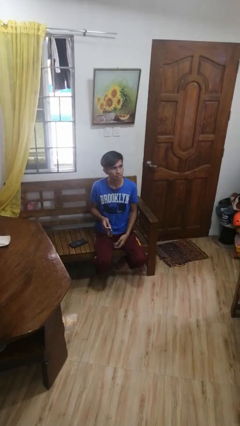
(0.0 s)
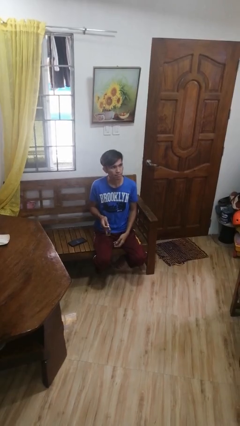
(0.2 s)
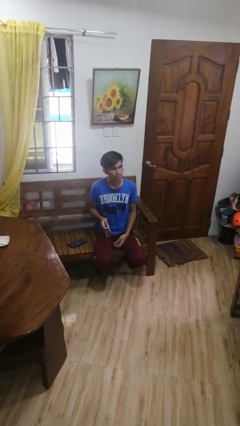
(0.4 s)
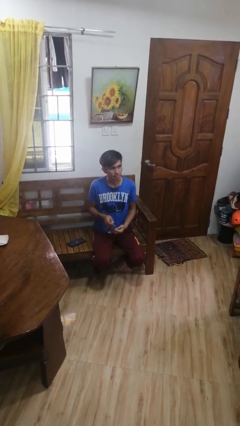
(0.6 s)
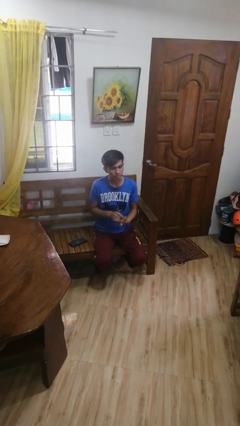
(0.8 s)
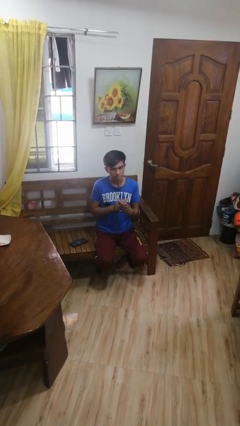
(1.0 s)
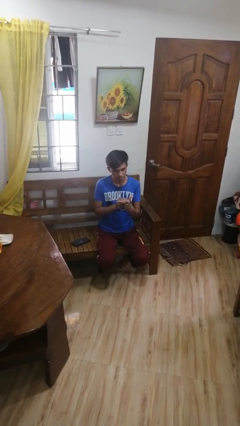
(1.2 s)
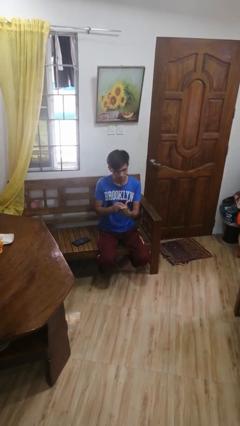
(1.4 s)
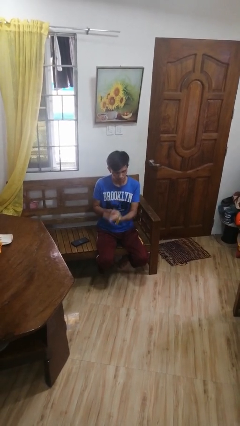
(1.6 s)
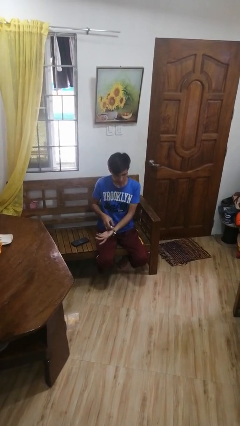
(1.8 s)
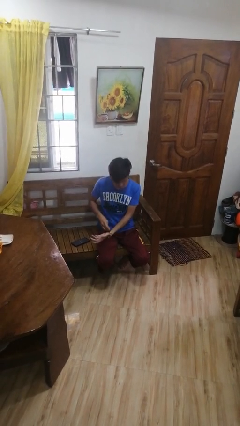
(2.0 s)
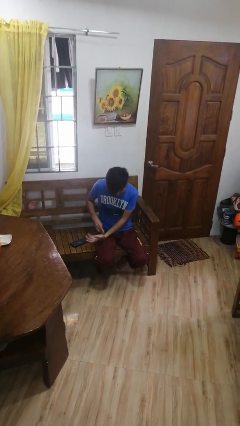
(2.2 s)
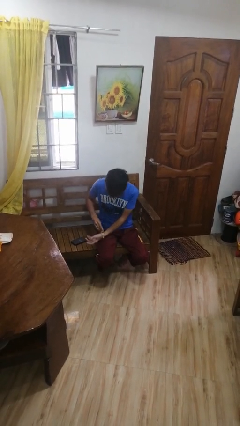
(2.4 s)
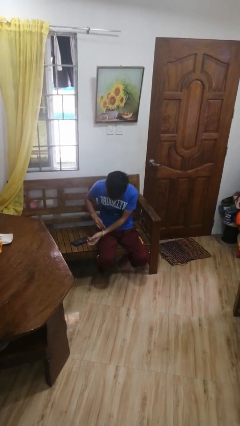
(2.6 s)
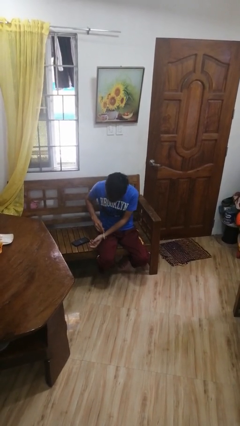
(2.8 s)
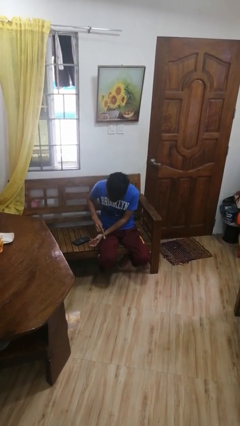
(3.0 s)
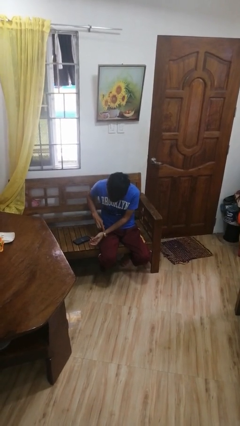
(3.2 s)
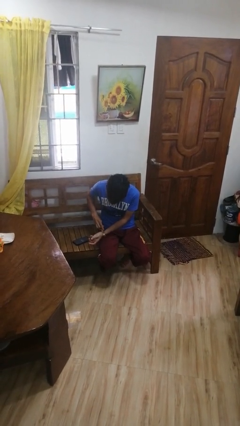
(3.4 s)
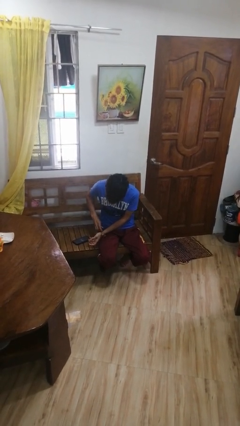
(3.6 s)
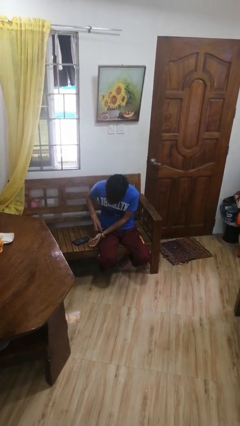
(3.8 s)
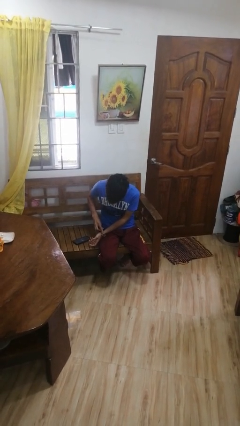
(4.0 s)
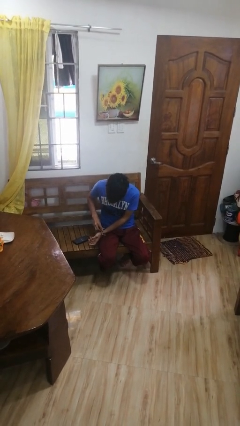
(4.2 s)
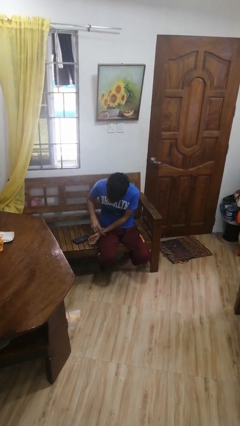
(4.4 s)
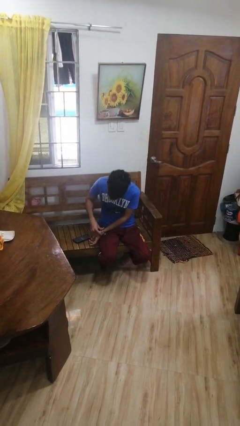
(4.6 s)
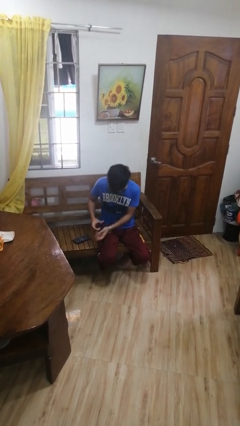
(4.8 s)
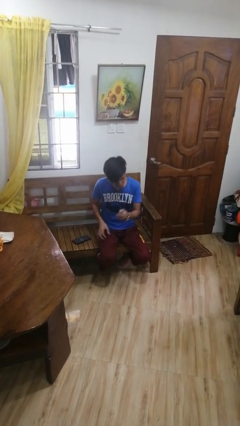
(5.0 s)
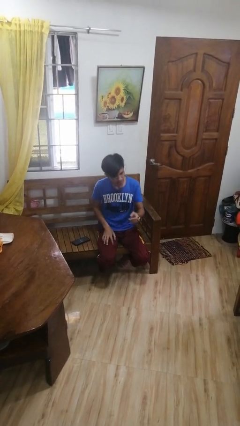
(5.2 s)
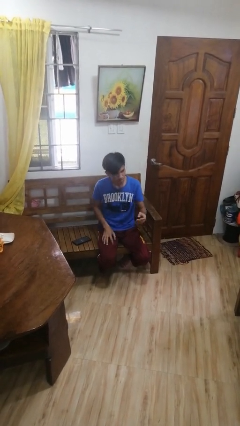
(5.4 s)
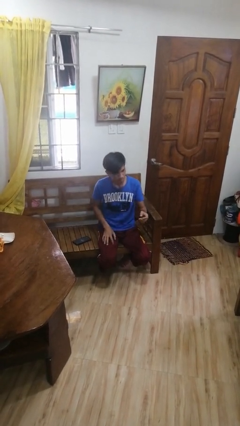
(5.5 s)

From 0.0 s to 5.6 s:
person puts on wristwatch

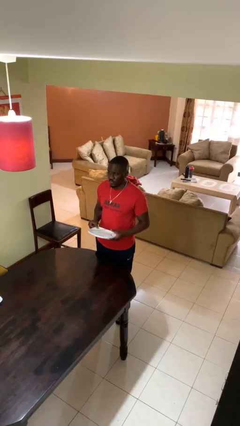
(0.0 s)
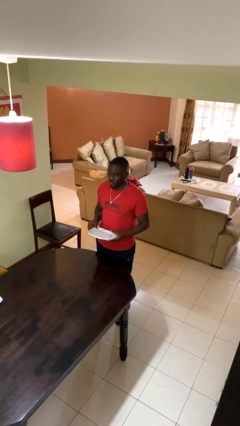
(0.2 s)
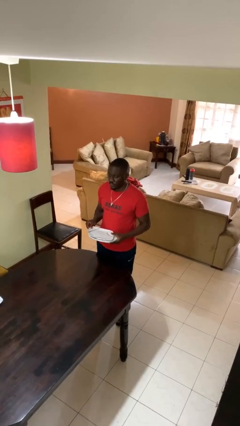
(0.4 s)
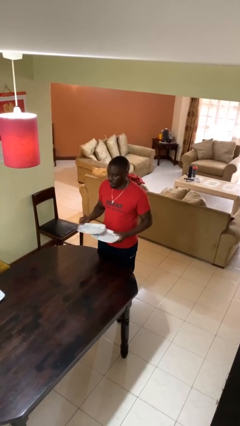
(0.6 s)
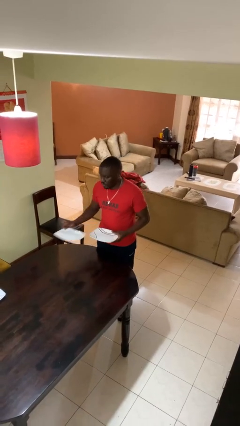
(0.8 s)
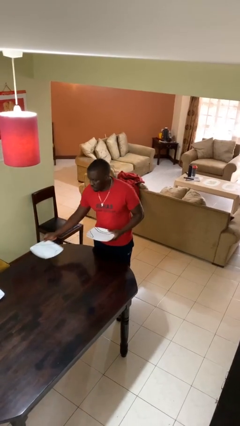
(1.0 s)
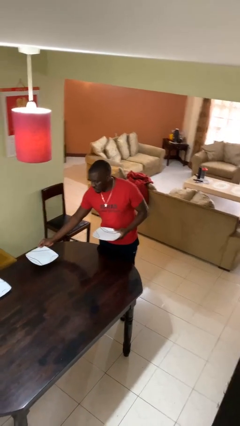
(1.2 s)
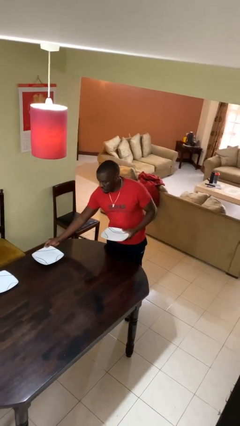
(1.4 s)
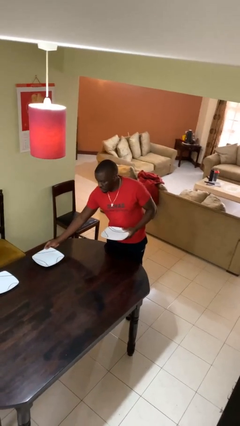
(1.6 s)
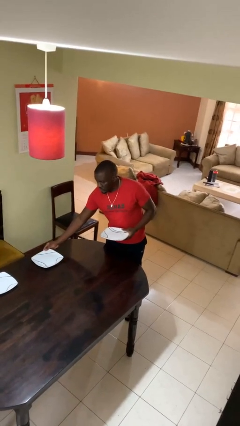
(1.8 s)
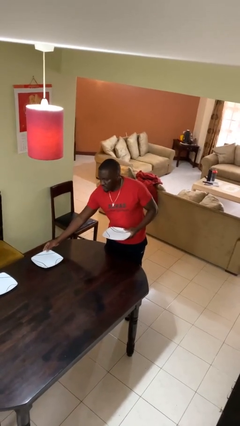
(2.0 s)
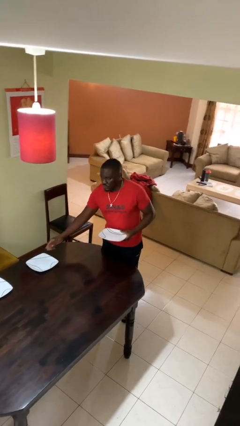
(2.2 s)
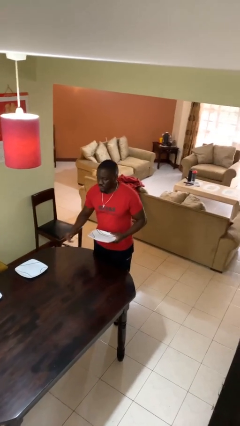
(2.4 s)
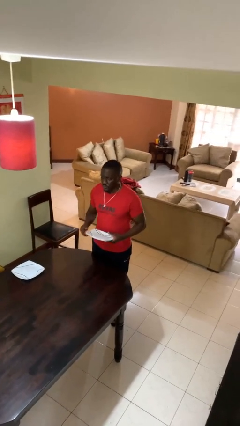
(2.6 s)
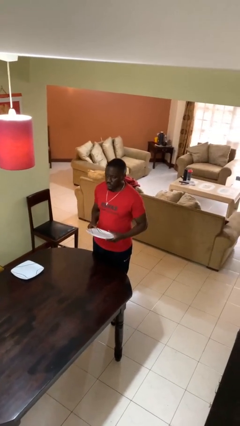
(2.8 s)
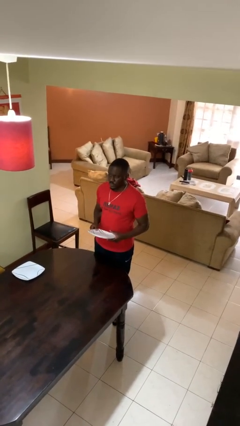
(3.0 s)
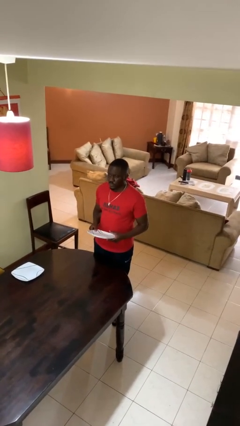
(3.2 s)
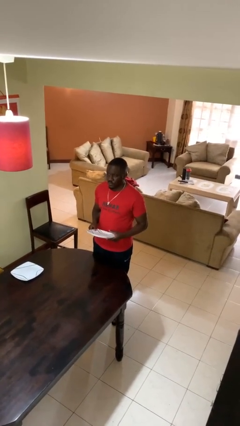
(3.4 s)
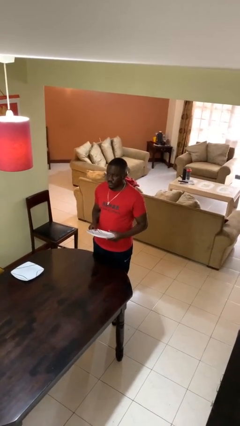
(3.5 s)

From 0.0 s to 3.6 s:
person sets table

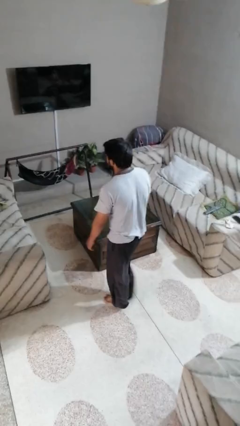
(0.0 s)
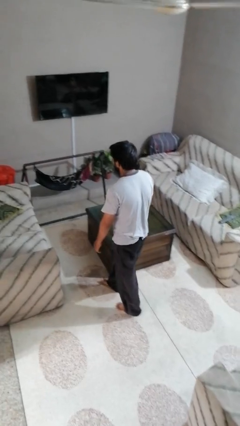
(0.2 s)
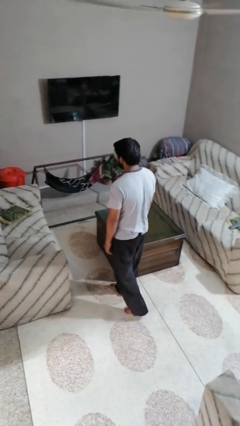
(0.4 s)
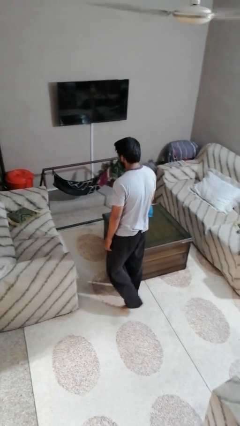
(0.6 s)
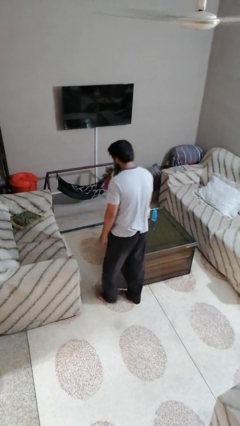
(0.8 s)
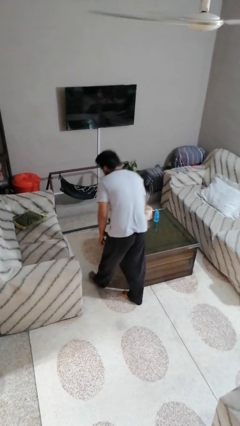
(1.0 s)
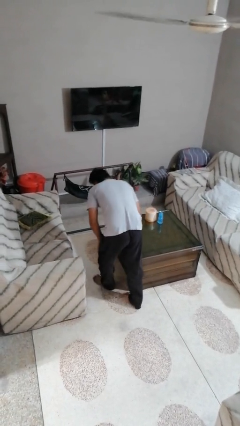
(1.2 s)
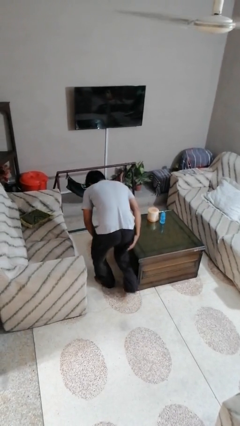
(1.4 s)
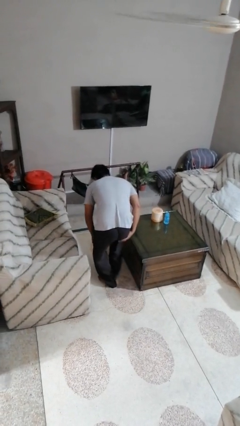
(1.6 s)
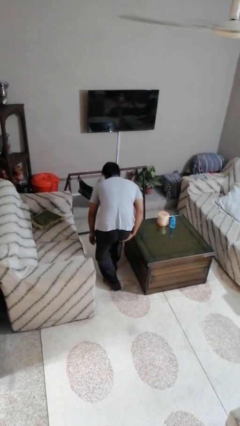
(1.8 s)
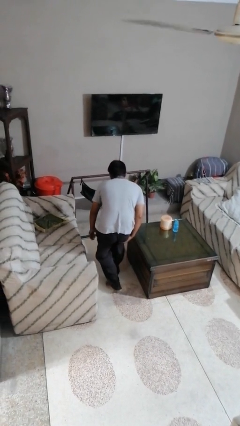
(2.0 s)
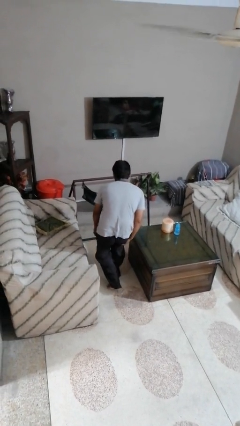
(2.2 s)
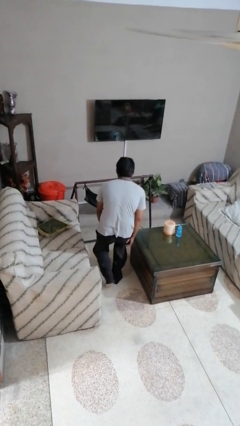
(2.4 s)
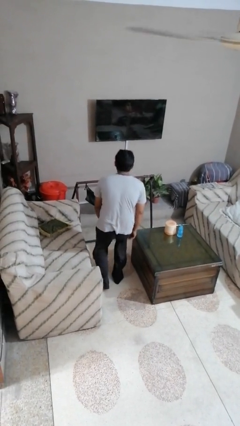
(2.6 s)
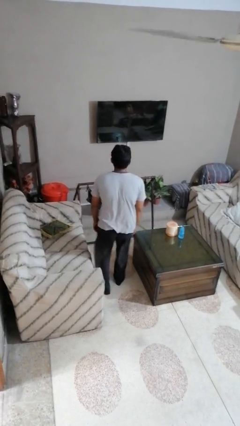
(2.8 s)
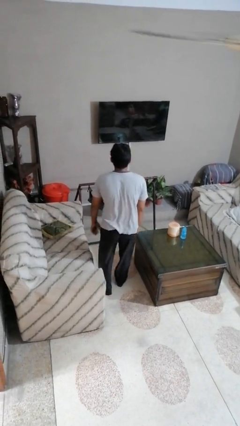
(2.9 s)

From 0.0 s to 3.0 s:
person bumps into table

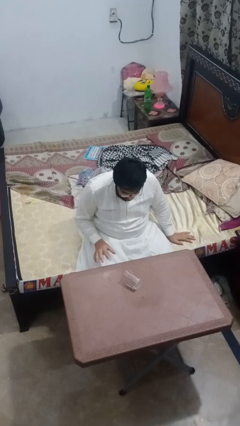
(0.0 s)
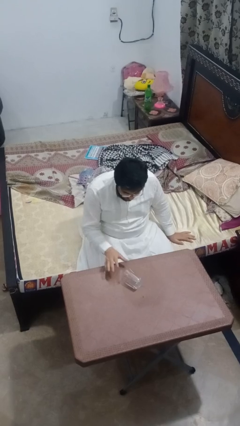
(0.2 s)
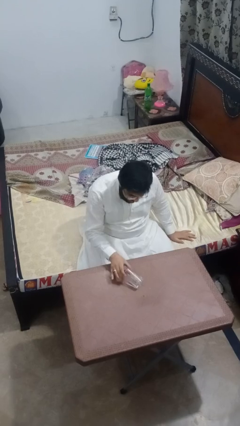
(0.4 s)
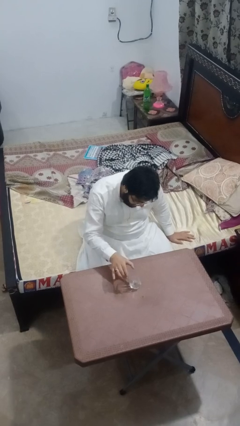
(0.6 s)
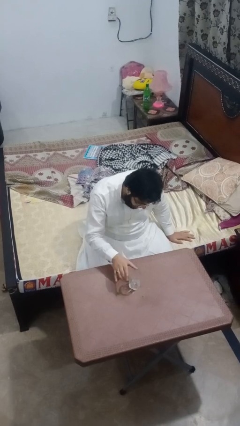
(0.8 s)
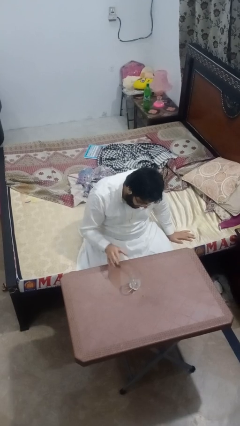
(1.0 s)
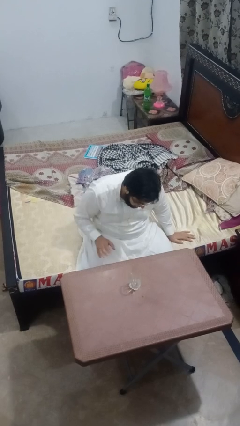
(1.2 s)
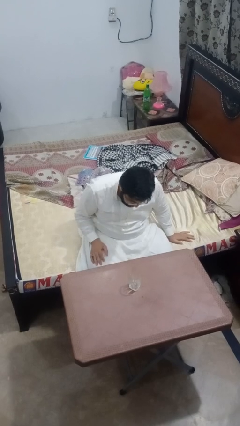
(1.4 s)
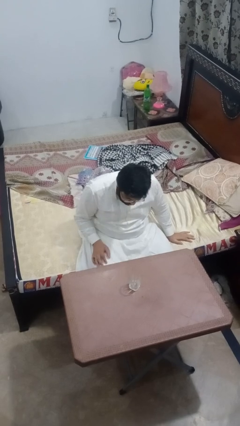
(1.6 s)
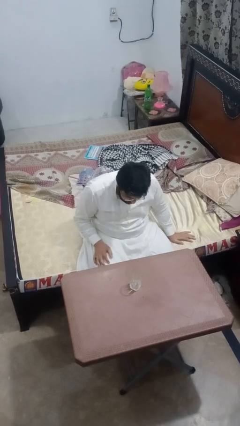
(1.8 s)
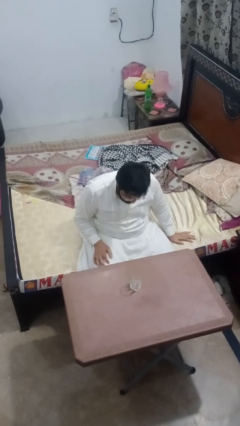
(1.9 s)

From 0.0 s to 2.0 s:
person sets upright glass

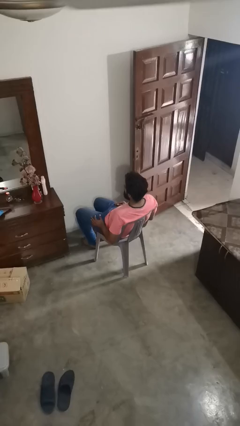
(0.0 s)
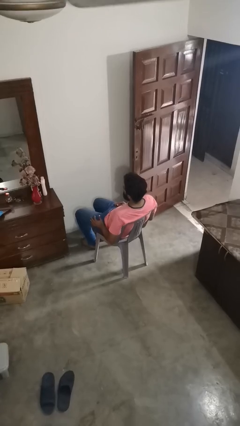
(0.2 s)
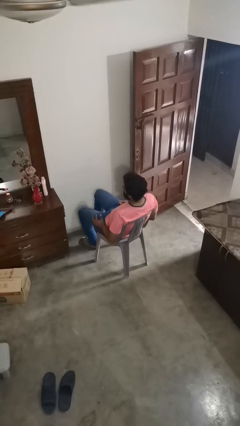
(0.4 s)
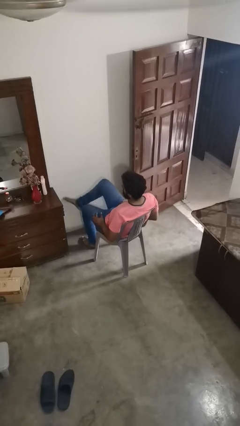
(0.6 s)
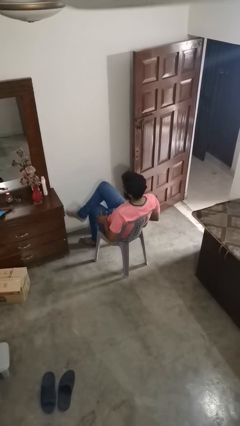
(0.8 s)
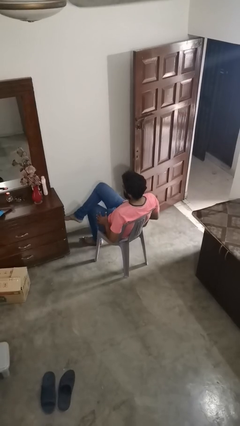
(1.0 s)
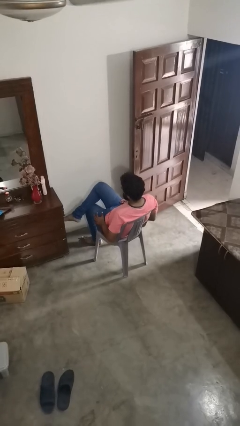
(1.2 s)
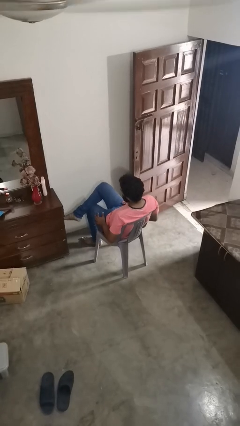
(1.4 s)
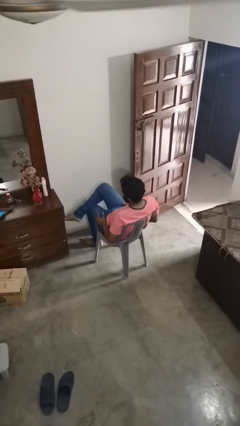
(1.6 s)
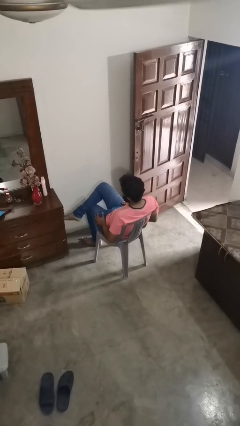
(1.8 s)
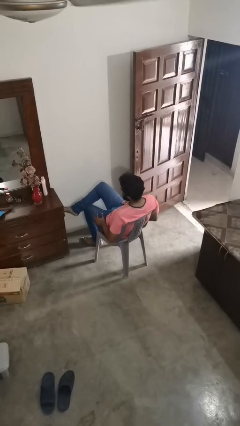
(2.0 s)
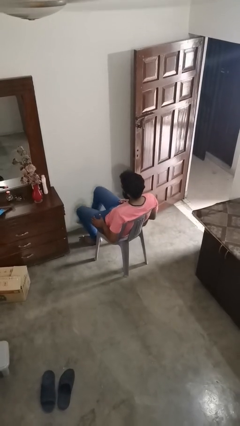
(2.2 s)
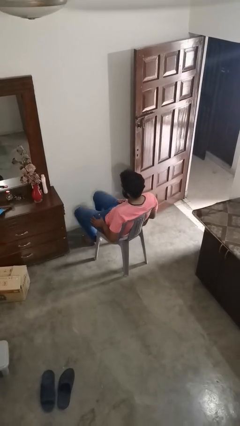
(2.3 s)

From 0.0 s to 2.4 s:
person crosses legs

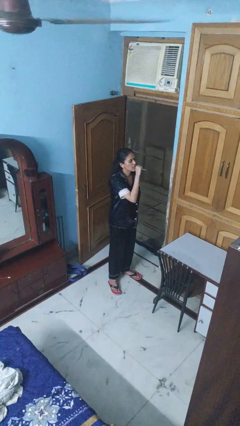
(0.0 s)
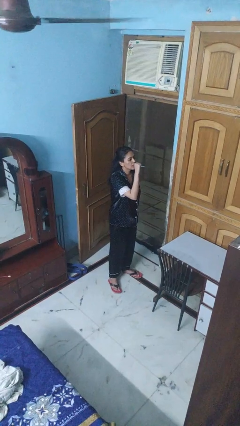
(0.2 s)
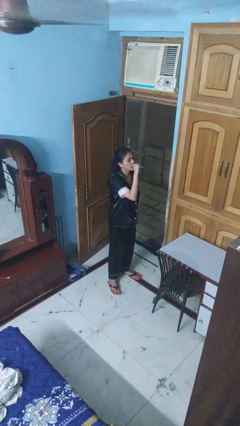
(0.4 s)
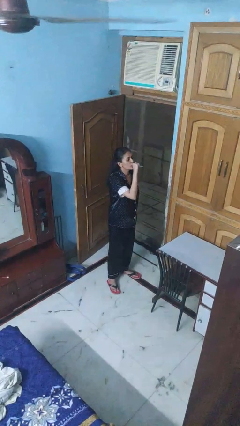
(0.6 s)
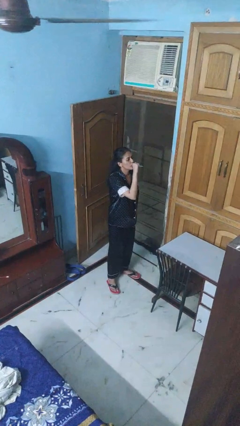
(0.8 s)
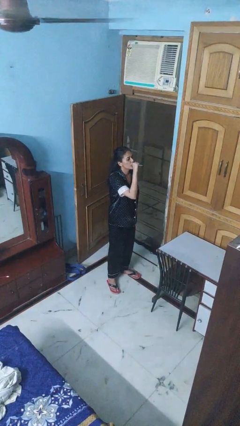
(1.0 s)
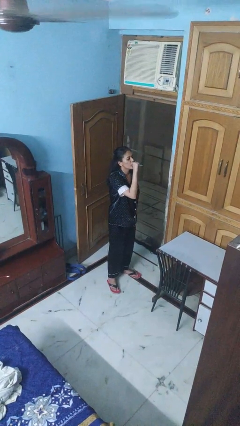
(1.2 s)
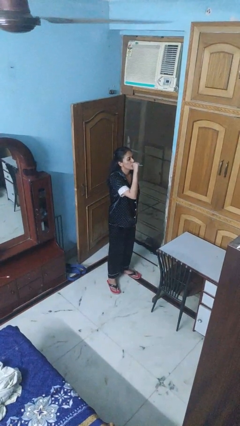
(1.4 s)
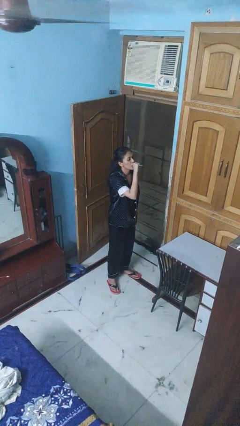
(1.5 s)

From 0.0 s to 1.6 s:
person vapes
